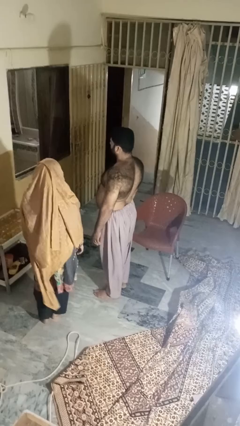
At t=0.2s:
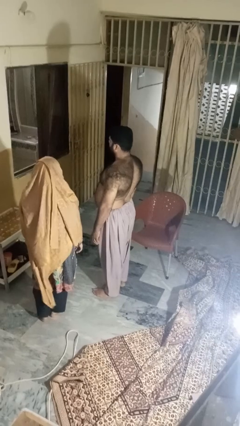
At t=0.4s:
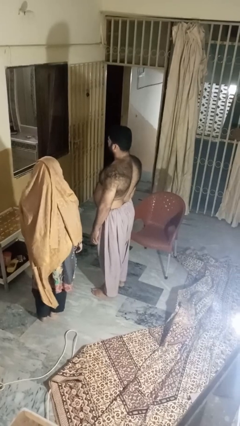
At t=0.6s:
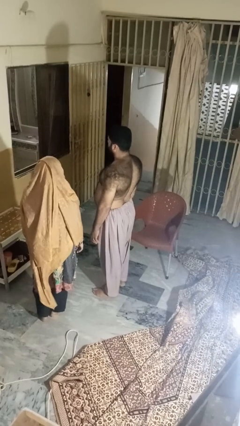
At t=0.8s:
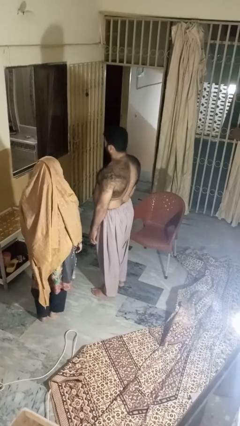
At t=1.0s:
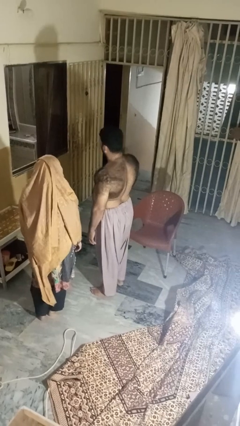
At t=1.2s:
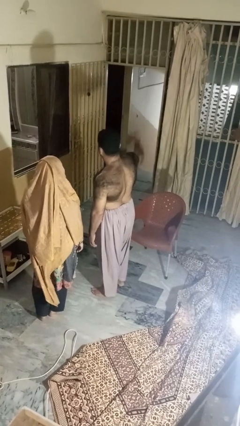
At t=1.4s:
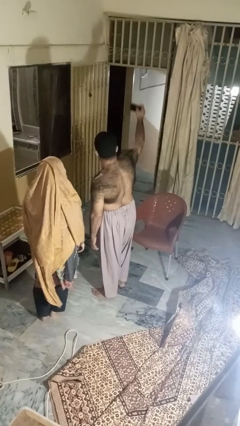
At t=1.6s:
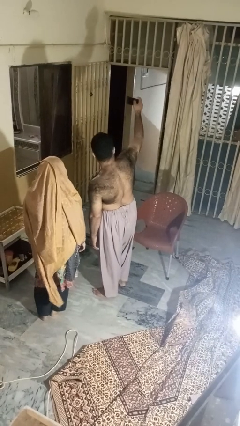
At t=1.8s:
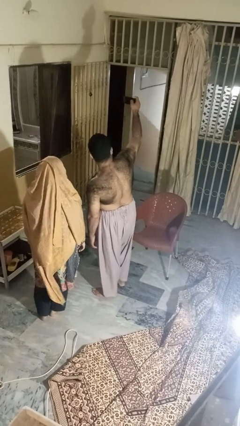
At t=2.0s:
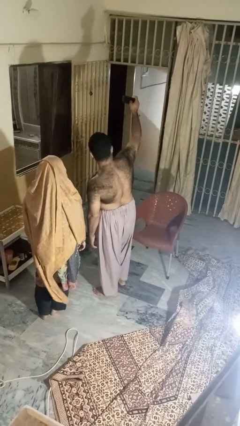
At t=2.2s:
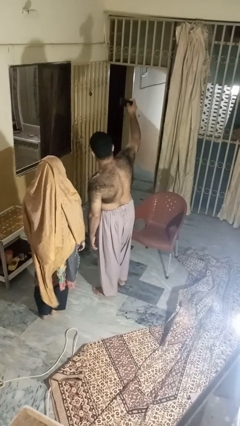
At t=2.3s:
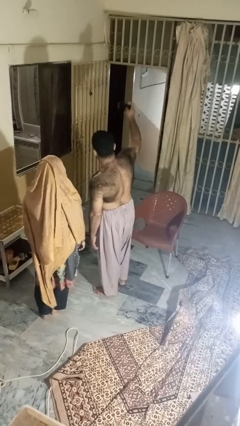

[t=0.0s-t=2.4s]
person takes selfie with person

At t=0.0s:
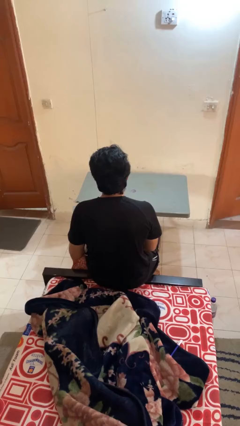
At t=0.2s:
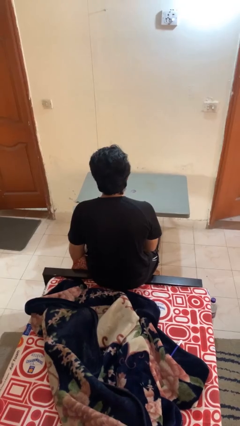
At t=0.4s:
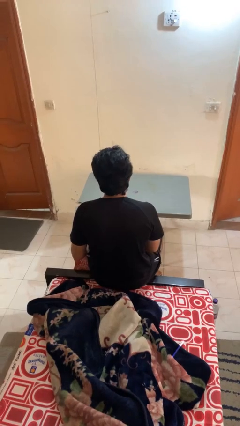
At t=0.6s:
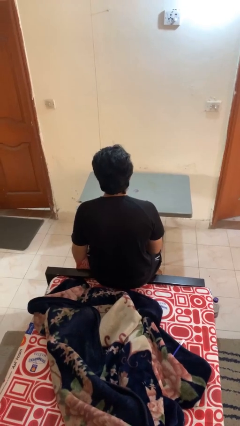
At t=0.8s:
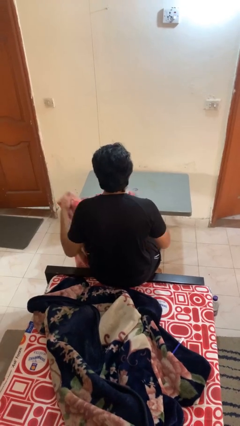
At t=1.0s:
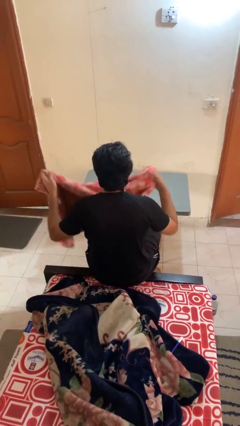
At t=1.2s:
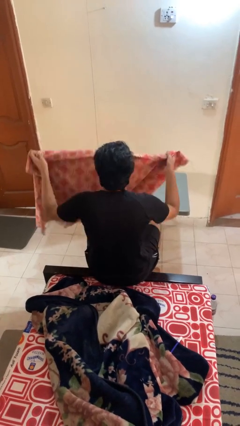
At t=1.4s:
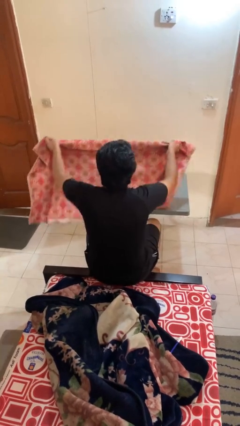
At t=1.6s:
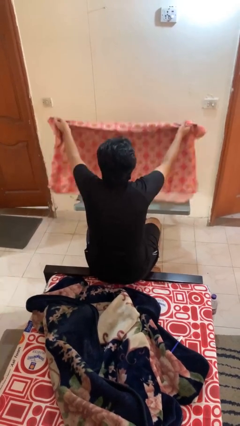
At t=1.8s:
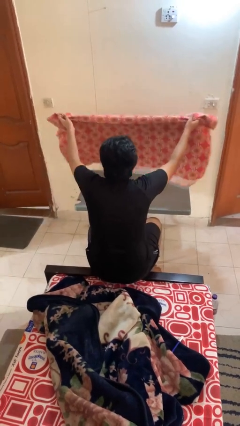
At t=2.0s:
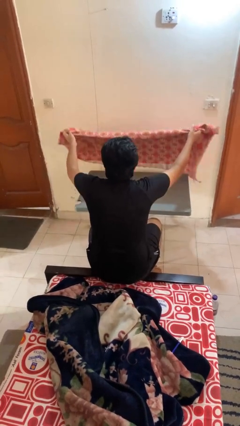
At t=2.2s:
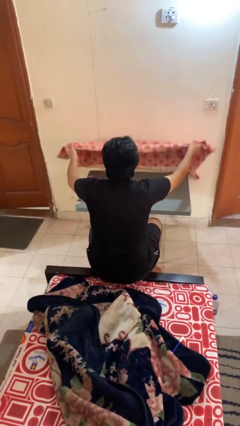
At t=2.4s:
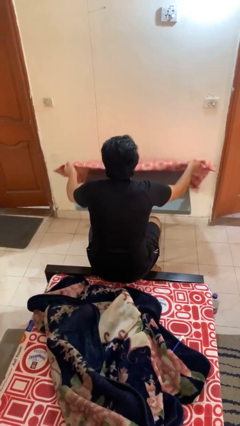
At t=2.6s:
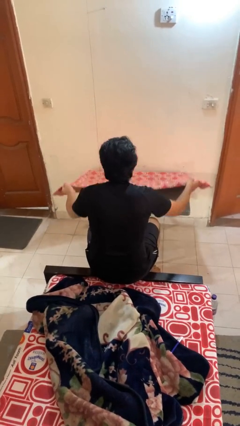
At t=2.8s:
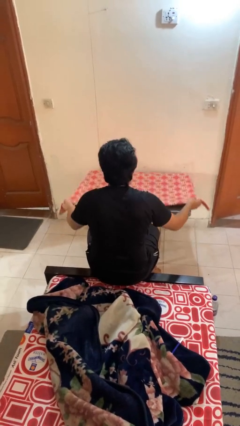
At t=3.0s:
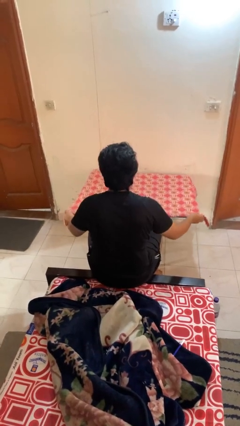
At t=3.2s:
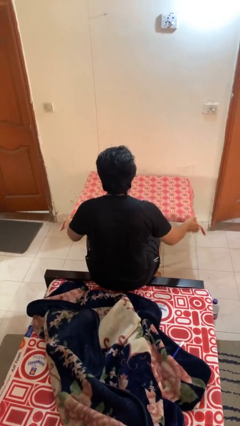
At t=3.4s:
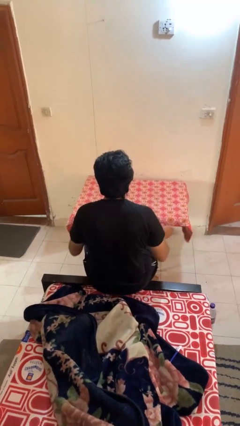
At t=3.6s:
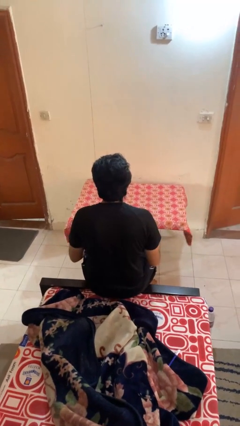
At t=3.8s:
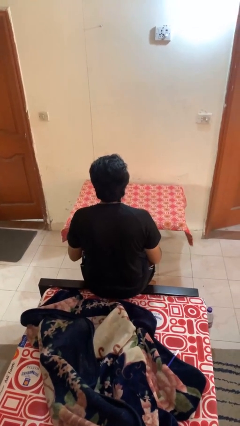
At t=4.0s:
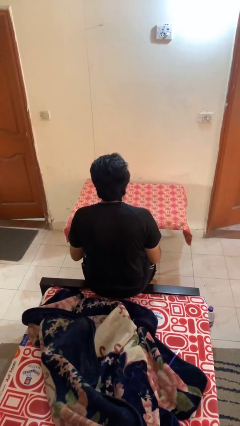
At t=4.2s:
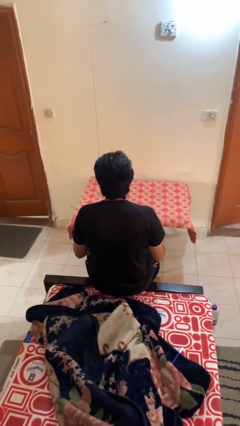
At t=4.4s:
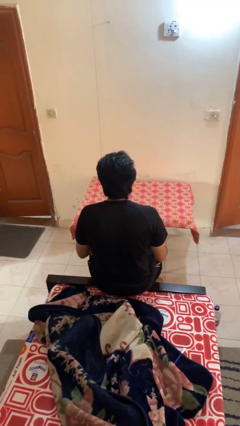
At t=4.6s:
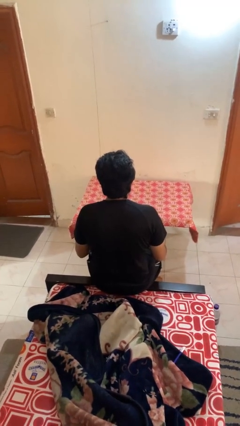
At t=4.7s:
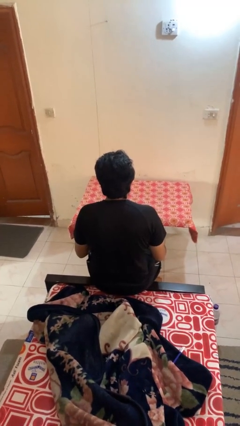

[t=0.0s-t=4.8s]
person spreads tablecloth

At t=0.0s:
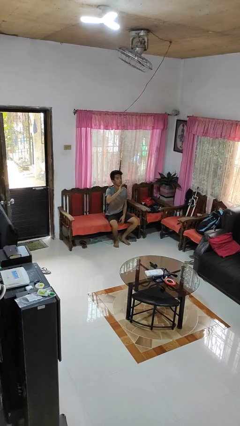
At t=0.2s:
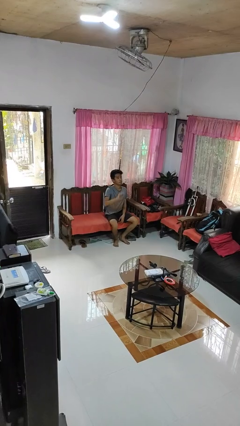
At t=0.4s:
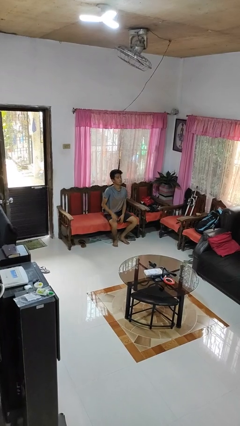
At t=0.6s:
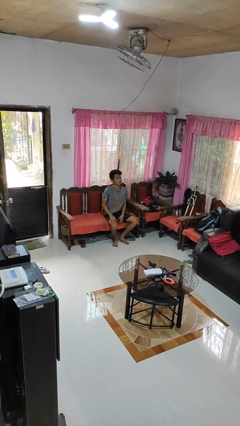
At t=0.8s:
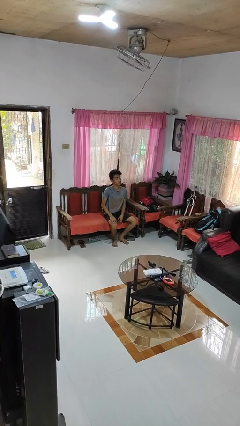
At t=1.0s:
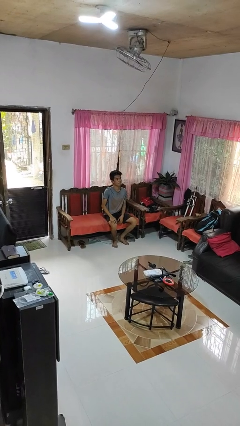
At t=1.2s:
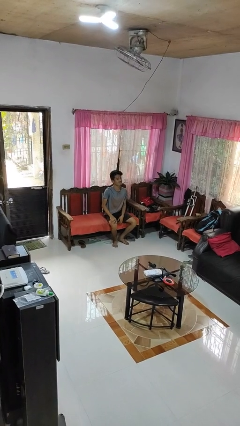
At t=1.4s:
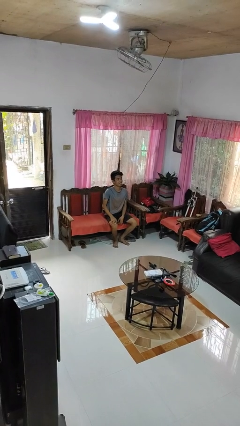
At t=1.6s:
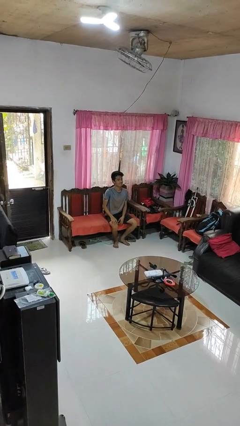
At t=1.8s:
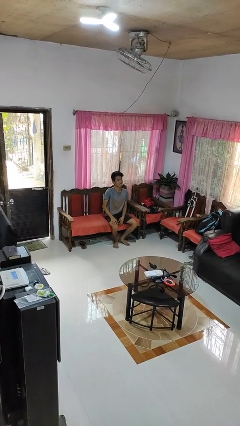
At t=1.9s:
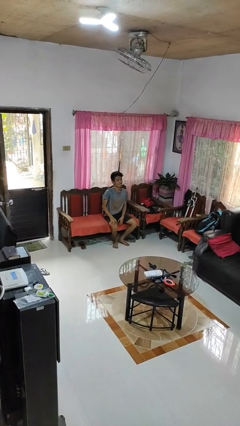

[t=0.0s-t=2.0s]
person gestures lower hand

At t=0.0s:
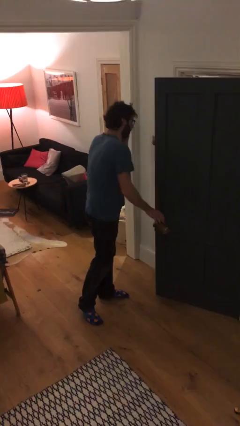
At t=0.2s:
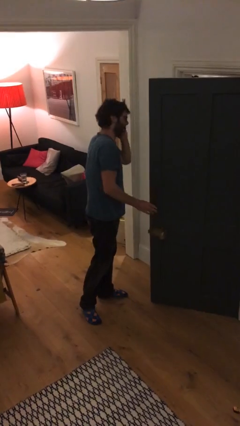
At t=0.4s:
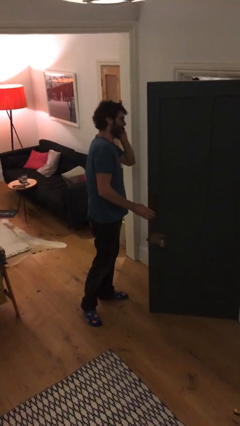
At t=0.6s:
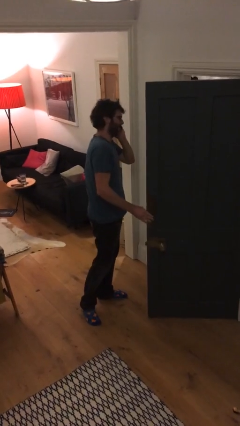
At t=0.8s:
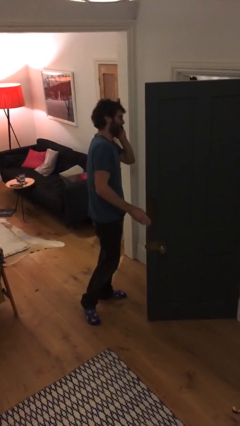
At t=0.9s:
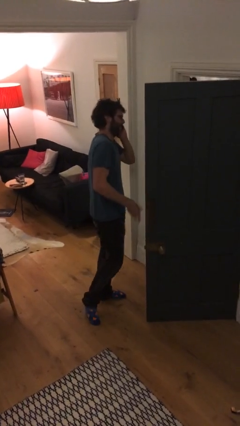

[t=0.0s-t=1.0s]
person opens facility door

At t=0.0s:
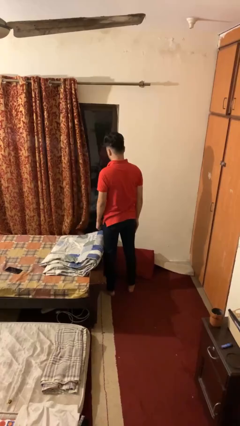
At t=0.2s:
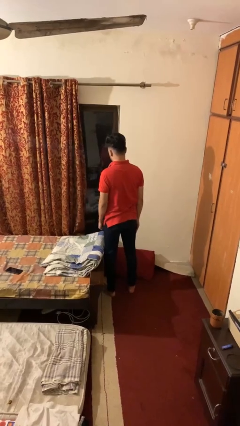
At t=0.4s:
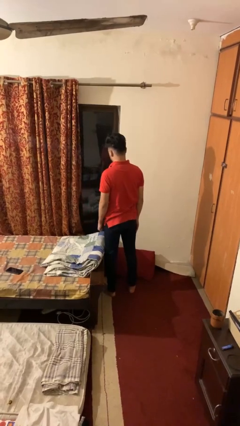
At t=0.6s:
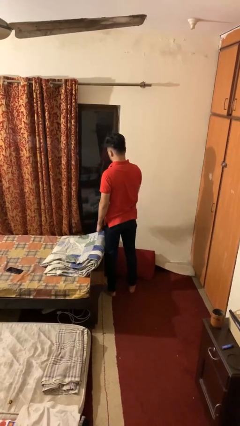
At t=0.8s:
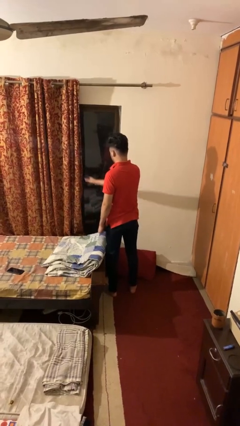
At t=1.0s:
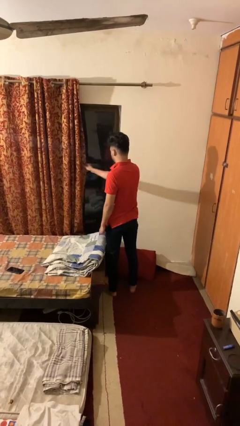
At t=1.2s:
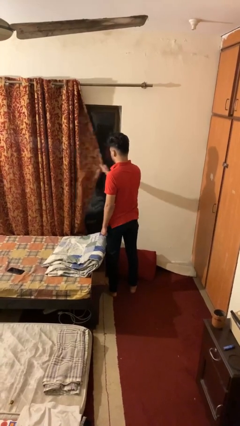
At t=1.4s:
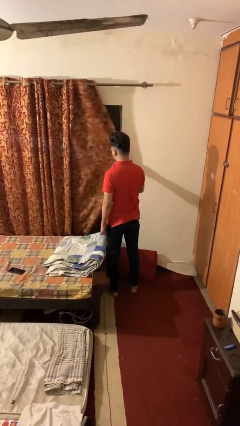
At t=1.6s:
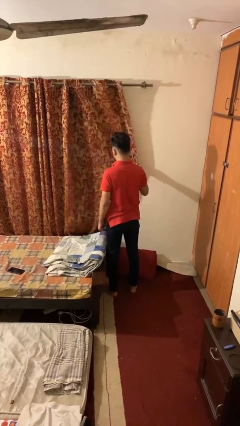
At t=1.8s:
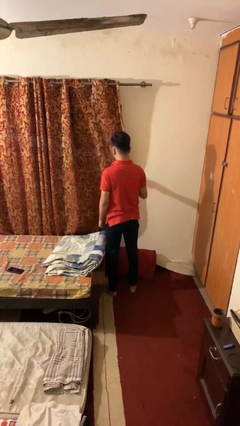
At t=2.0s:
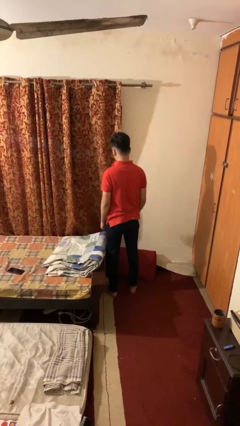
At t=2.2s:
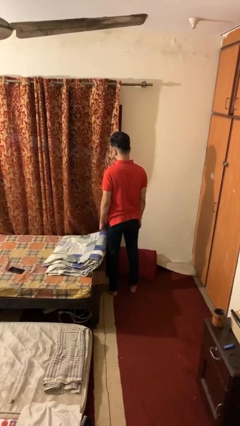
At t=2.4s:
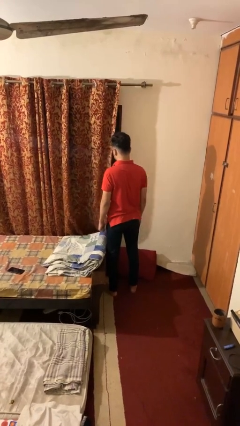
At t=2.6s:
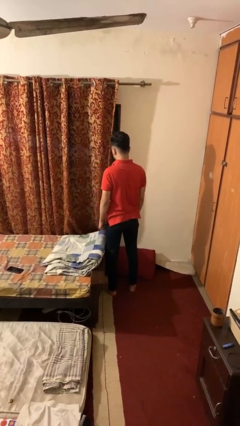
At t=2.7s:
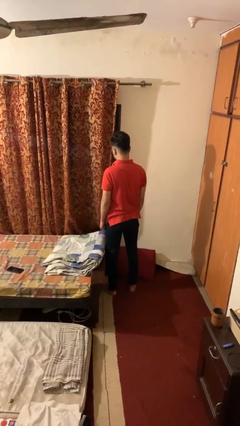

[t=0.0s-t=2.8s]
person closes curtains

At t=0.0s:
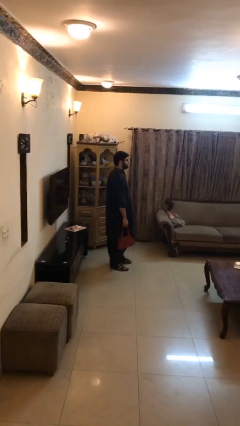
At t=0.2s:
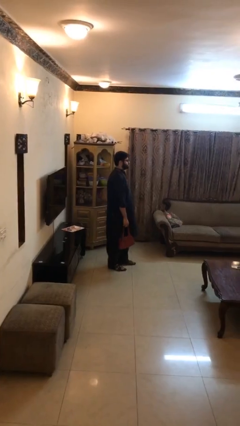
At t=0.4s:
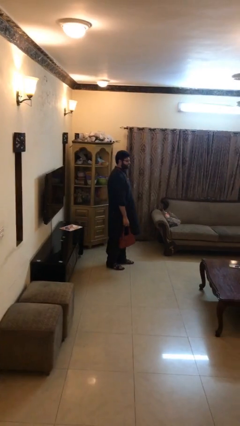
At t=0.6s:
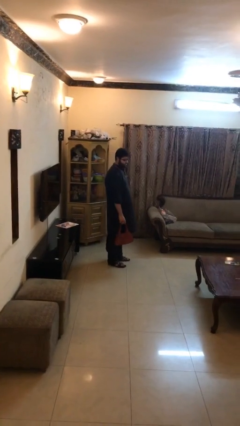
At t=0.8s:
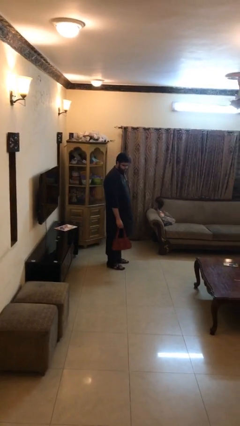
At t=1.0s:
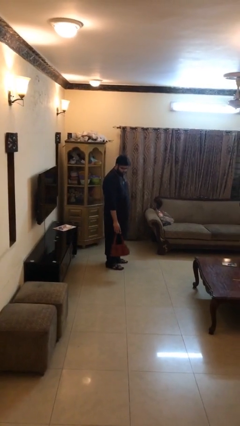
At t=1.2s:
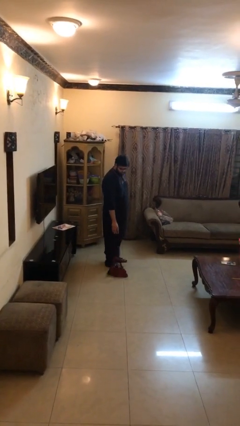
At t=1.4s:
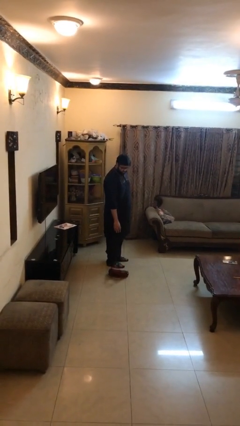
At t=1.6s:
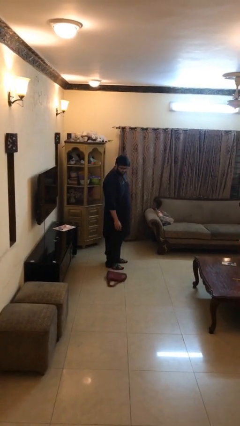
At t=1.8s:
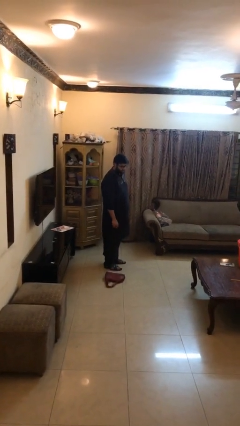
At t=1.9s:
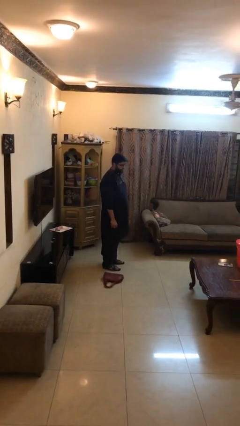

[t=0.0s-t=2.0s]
person puts down object on floor

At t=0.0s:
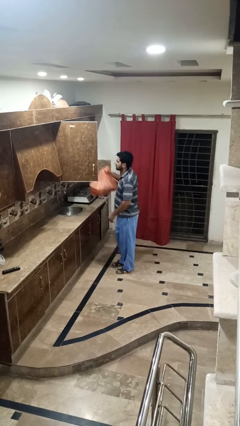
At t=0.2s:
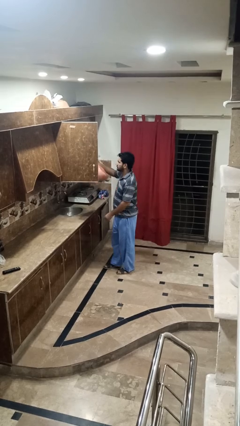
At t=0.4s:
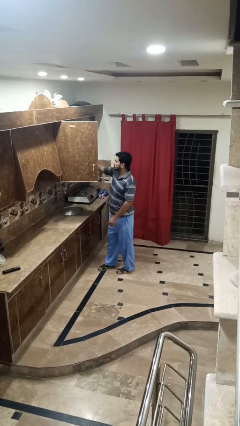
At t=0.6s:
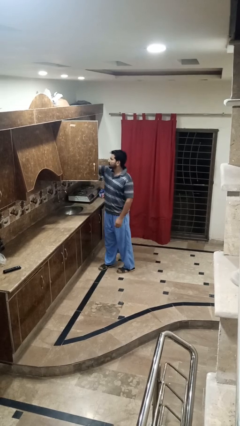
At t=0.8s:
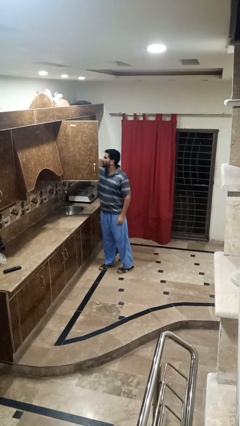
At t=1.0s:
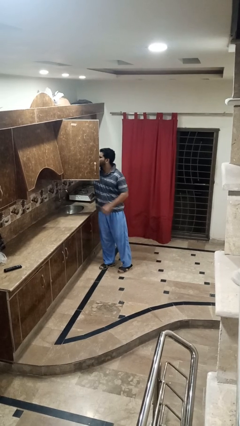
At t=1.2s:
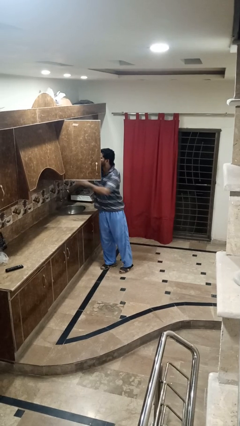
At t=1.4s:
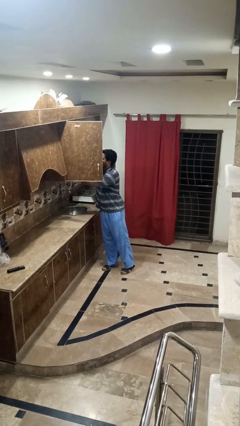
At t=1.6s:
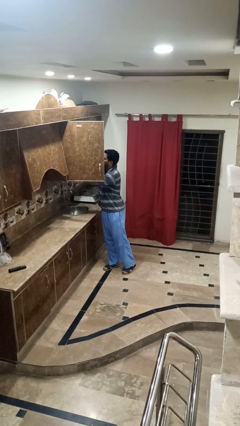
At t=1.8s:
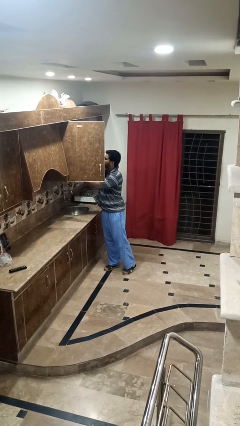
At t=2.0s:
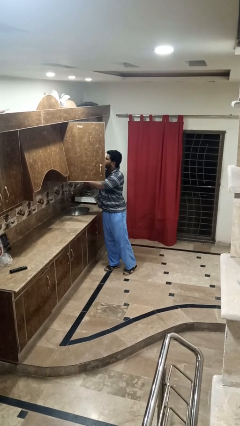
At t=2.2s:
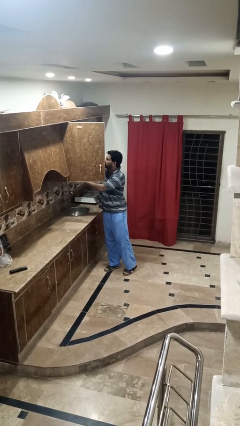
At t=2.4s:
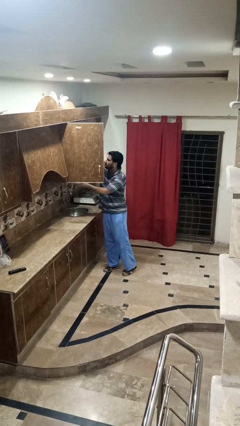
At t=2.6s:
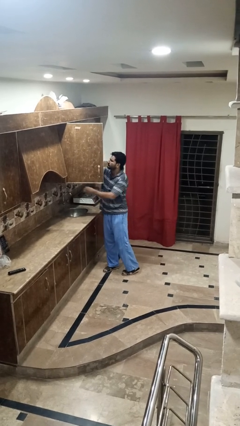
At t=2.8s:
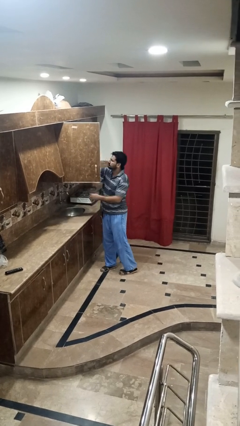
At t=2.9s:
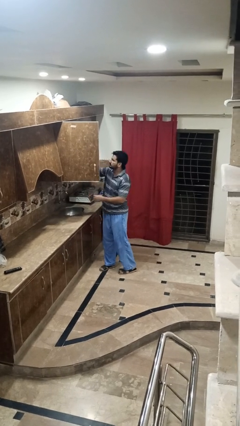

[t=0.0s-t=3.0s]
person loads groceries into cabinet
